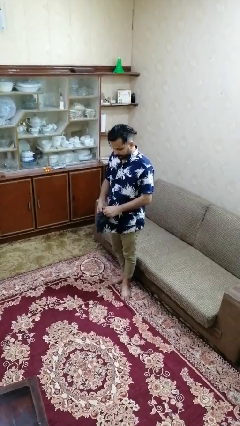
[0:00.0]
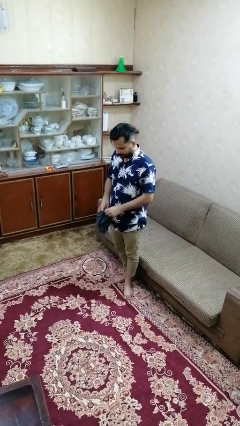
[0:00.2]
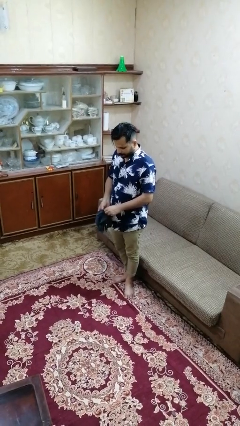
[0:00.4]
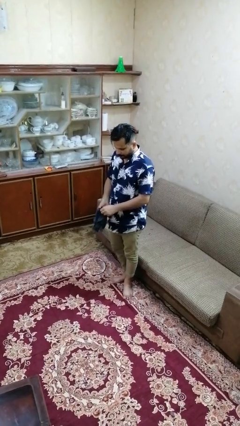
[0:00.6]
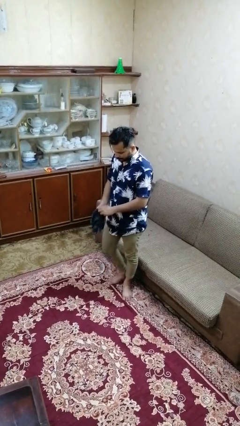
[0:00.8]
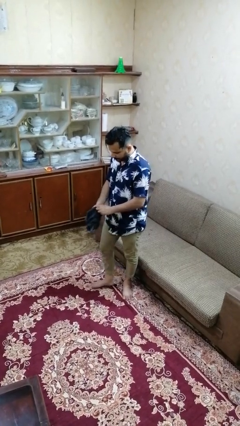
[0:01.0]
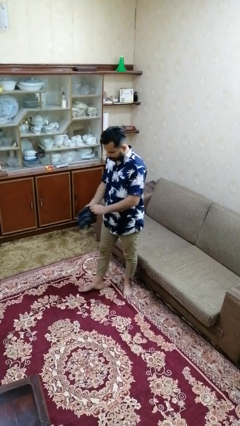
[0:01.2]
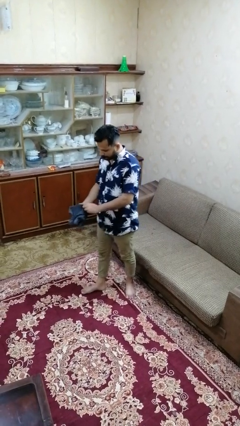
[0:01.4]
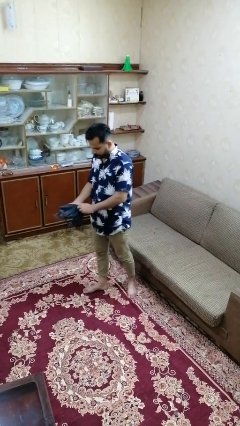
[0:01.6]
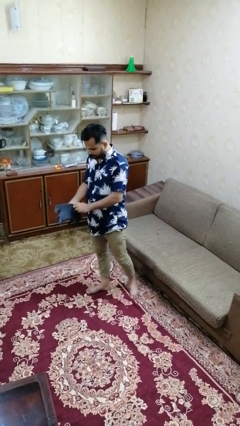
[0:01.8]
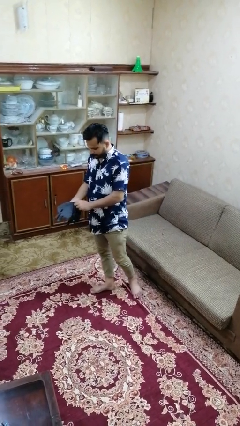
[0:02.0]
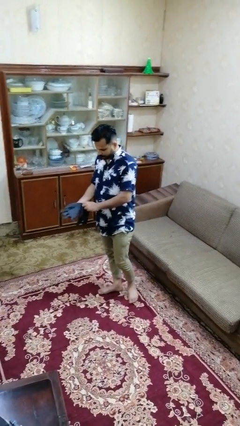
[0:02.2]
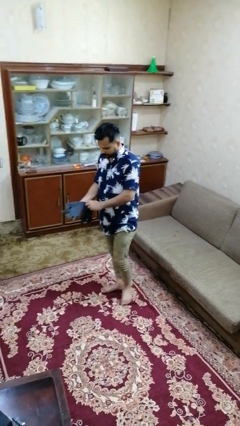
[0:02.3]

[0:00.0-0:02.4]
person puts on gloves

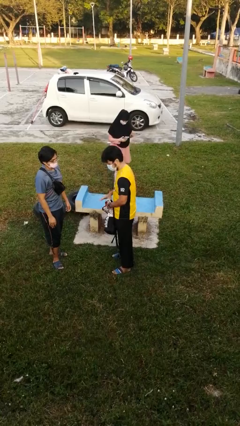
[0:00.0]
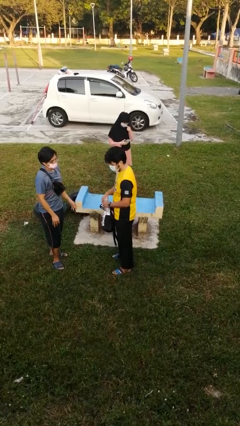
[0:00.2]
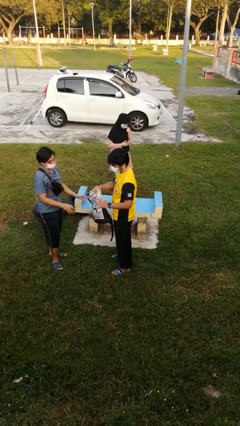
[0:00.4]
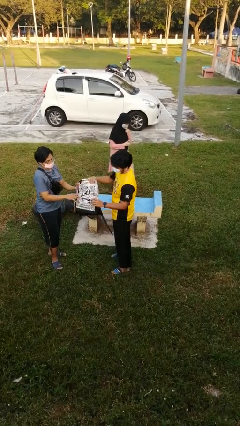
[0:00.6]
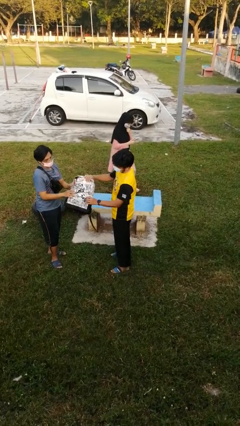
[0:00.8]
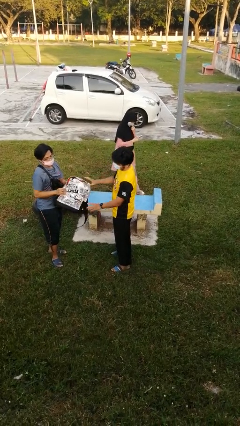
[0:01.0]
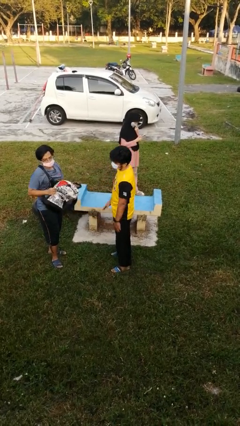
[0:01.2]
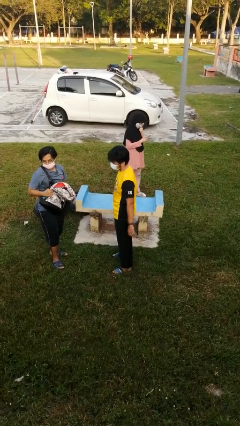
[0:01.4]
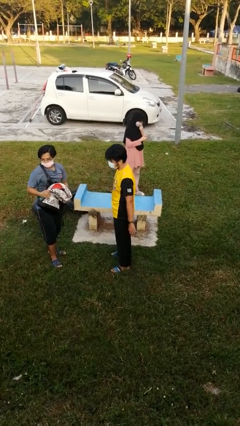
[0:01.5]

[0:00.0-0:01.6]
person transfers object to person

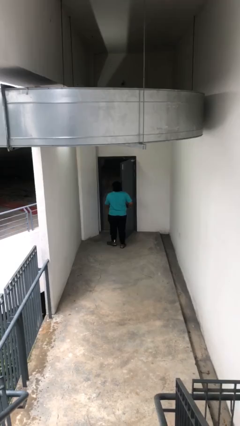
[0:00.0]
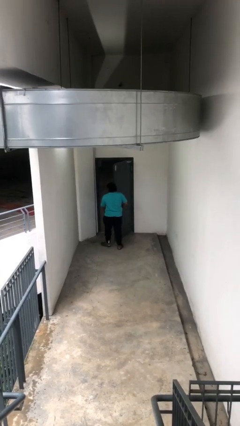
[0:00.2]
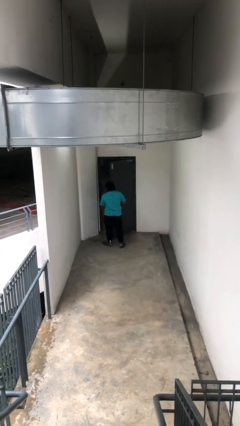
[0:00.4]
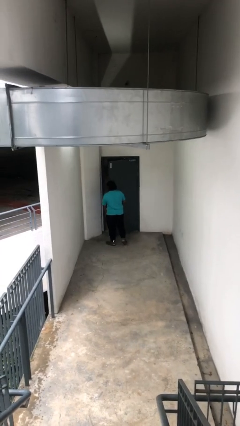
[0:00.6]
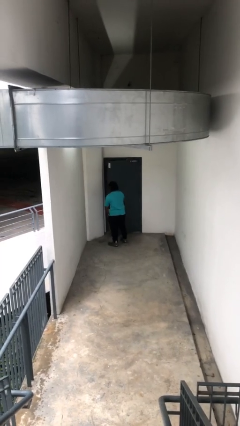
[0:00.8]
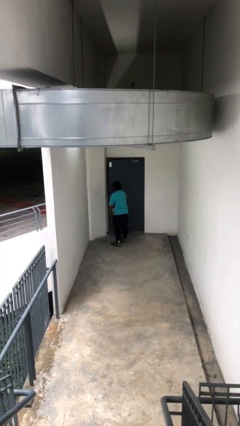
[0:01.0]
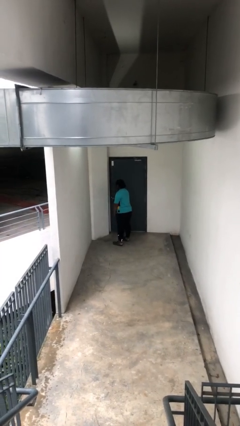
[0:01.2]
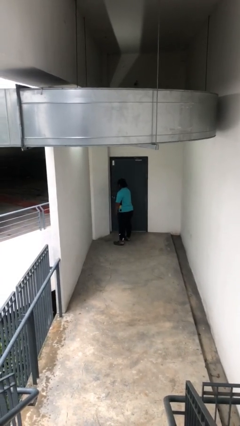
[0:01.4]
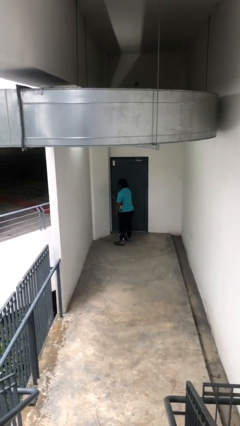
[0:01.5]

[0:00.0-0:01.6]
person closes facility door

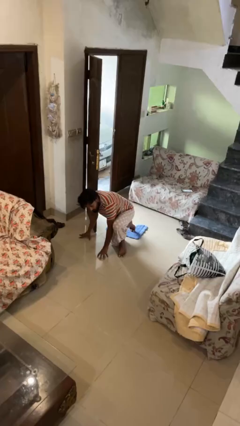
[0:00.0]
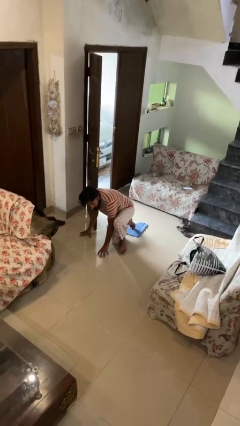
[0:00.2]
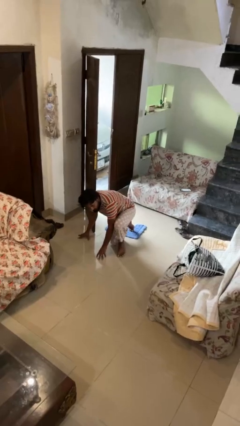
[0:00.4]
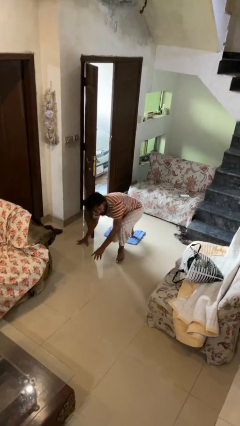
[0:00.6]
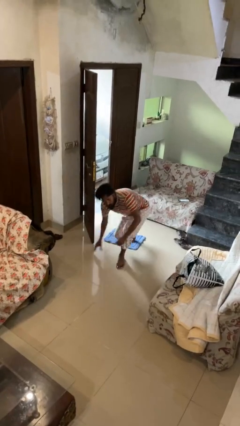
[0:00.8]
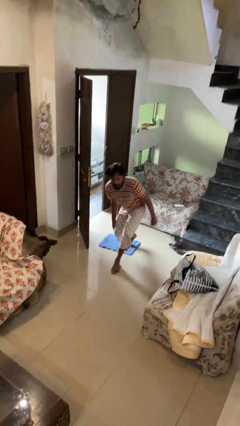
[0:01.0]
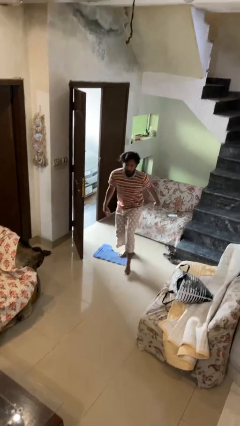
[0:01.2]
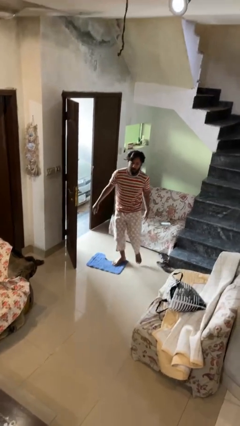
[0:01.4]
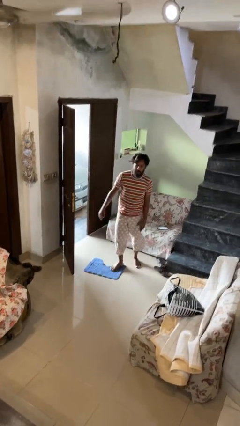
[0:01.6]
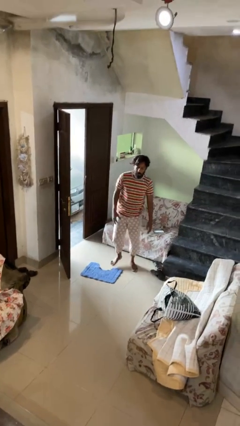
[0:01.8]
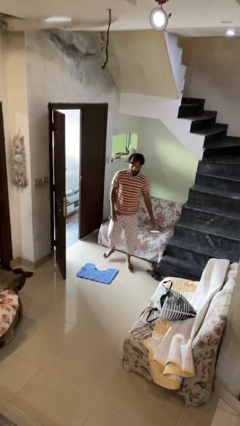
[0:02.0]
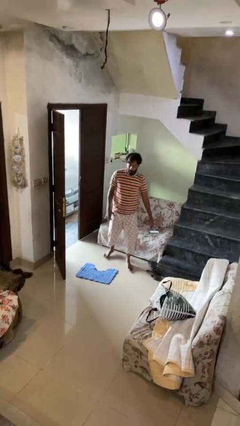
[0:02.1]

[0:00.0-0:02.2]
person stands up from floor

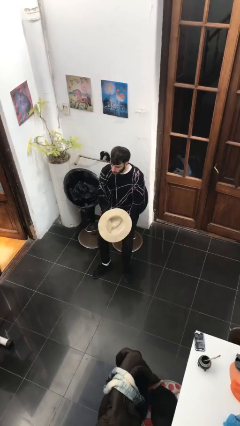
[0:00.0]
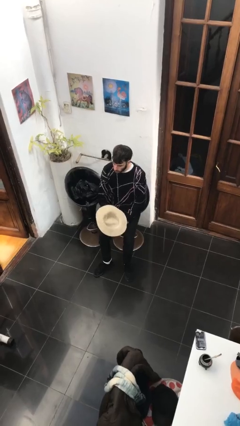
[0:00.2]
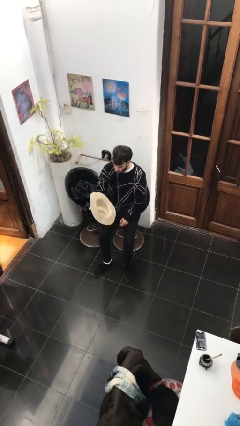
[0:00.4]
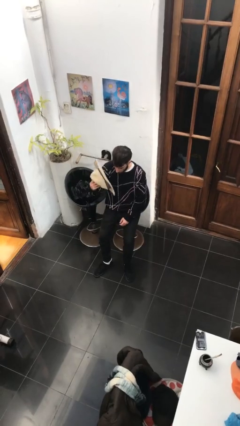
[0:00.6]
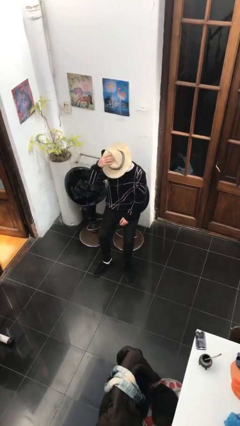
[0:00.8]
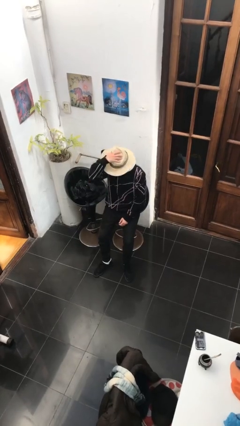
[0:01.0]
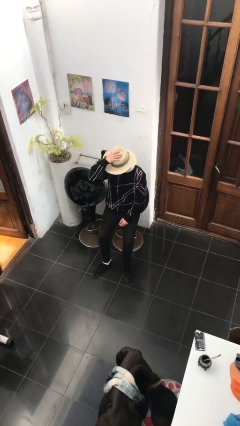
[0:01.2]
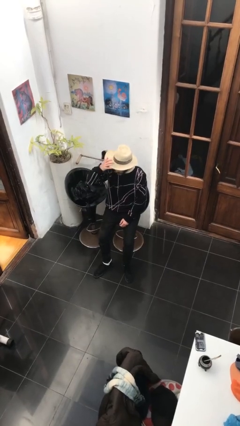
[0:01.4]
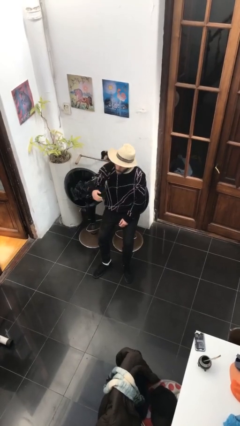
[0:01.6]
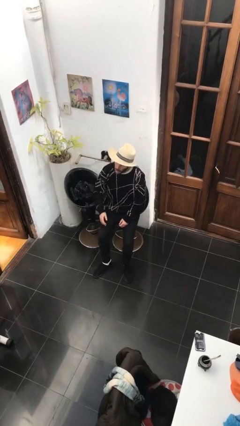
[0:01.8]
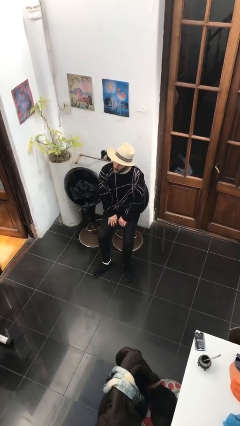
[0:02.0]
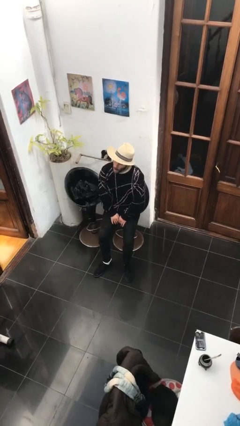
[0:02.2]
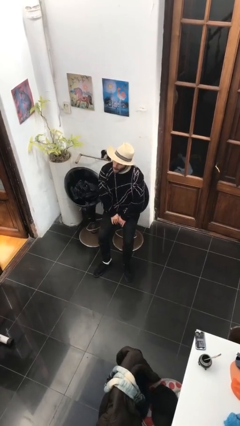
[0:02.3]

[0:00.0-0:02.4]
person puts on hat

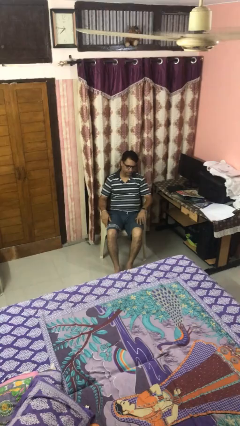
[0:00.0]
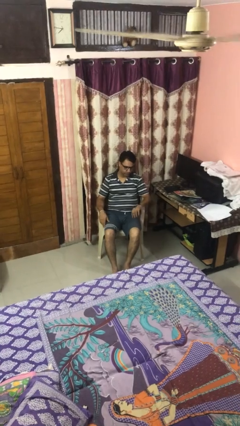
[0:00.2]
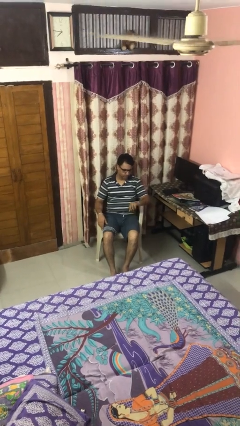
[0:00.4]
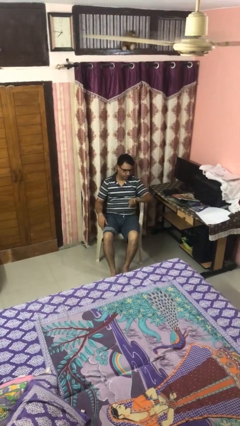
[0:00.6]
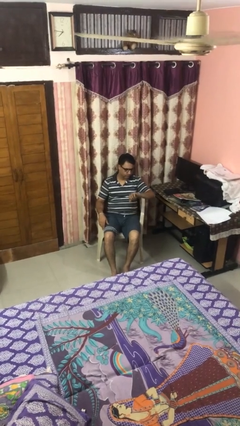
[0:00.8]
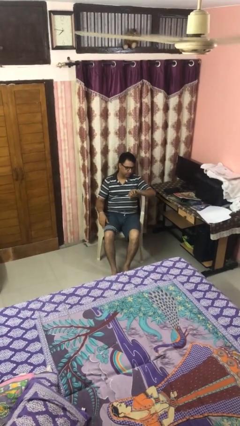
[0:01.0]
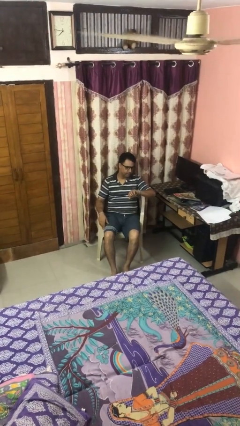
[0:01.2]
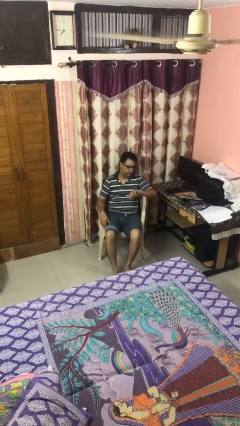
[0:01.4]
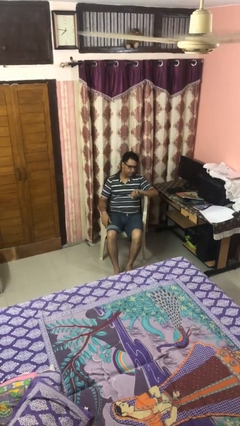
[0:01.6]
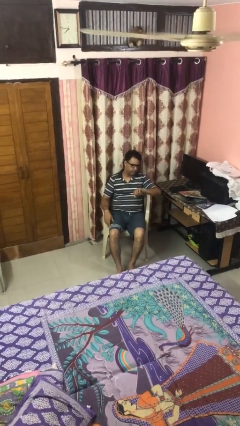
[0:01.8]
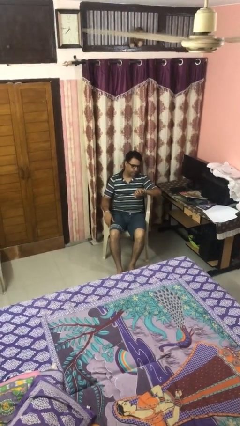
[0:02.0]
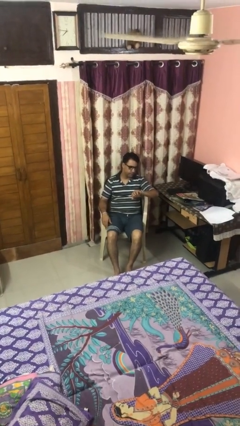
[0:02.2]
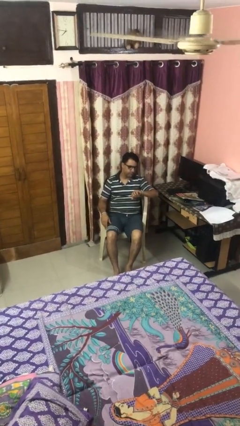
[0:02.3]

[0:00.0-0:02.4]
person looks at wristwatch

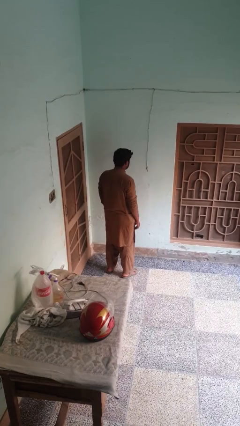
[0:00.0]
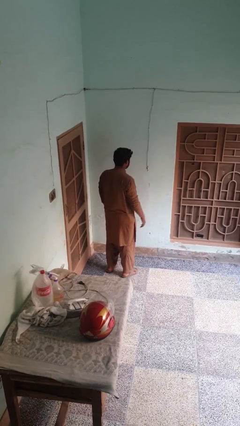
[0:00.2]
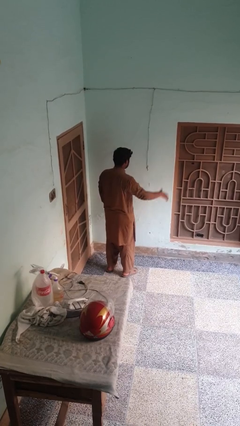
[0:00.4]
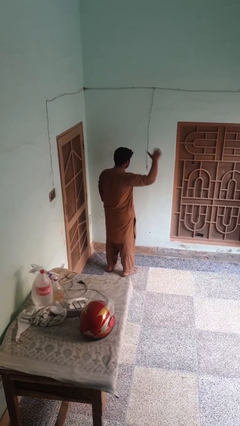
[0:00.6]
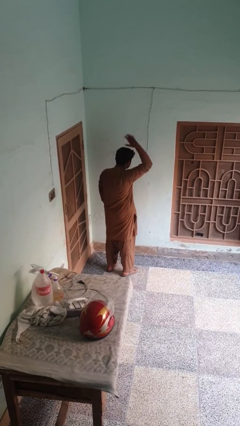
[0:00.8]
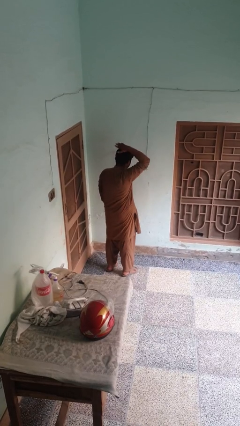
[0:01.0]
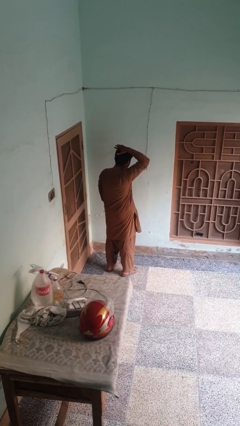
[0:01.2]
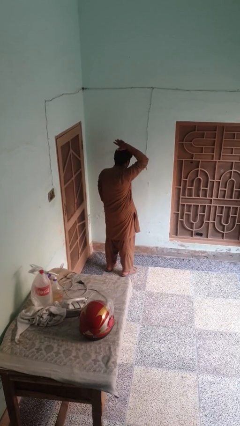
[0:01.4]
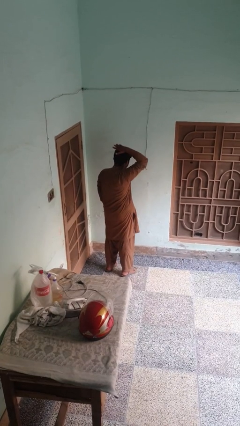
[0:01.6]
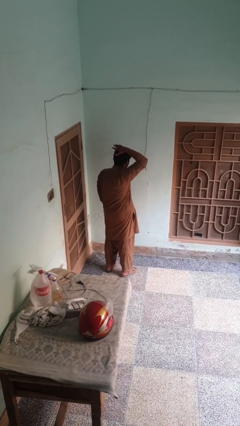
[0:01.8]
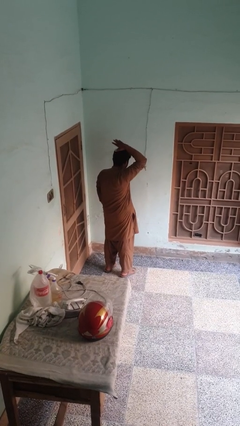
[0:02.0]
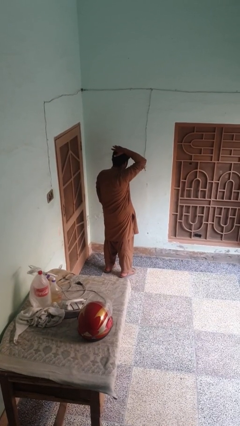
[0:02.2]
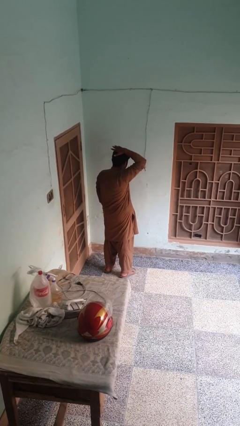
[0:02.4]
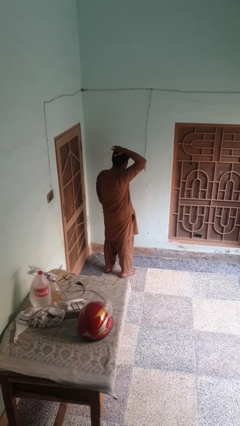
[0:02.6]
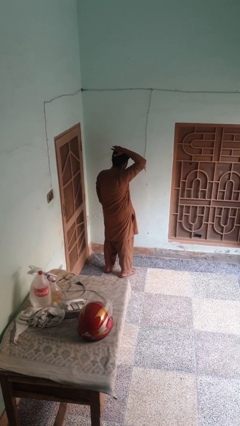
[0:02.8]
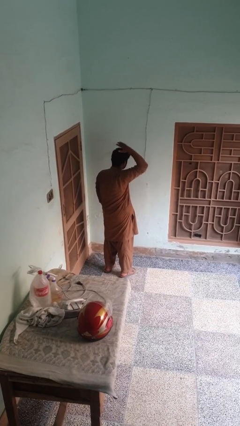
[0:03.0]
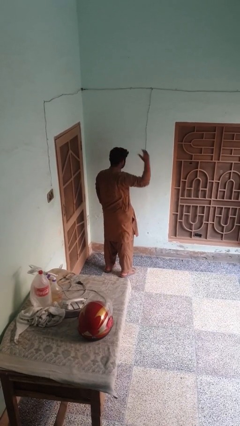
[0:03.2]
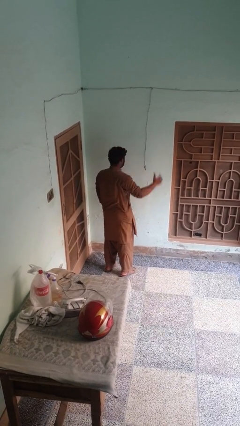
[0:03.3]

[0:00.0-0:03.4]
person pats head

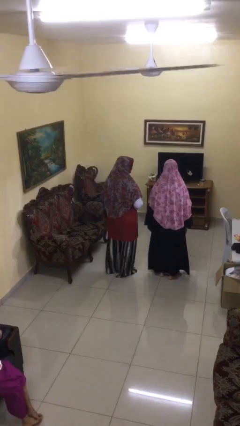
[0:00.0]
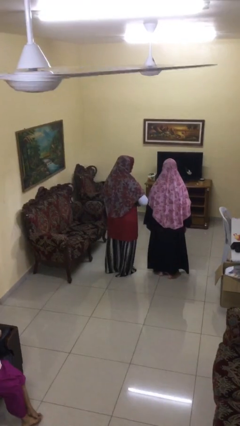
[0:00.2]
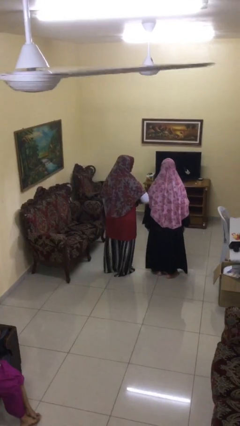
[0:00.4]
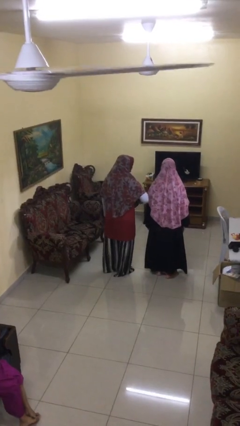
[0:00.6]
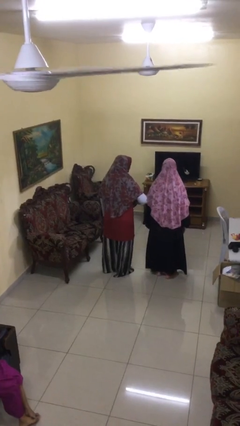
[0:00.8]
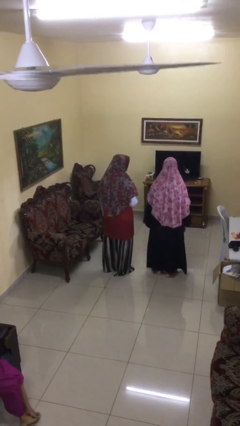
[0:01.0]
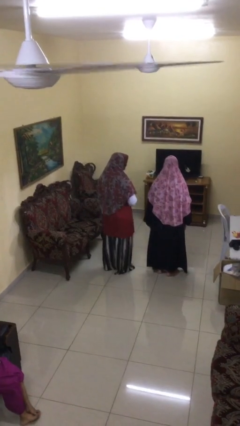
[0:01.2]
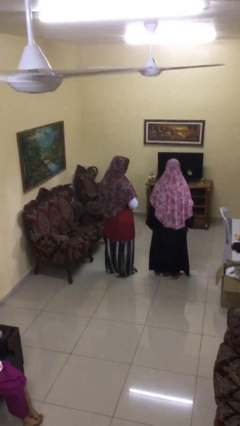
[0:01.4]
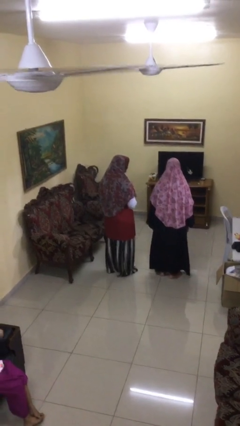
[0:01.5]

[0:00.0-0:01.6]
person nudges person with elbow
